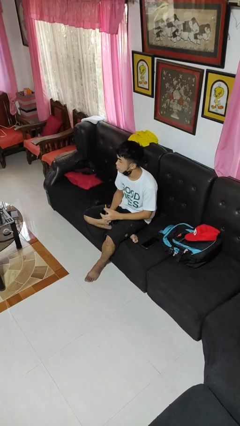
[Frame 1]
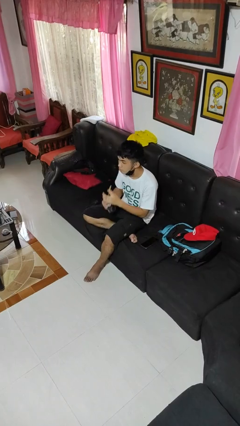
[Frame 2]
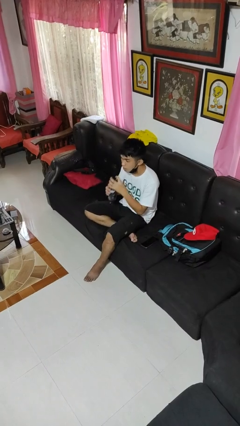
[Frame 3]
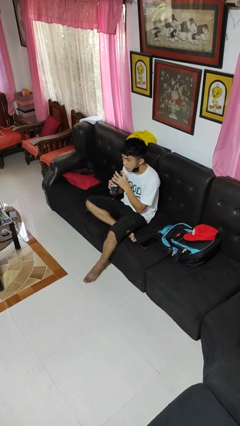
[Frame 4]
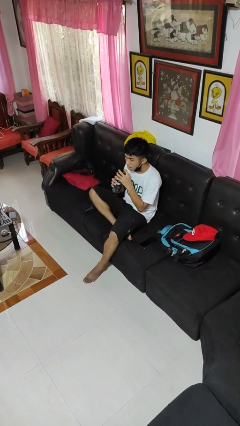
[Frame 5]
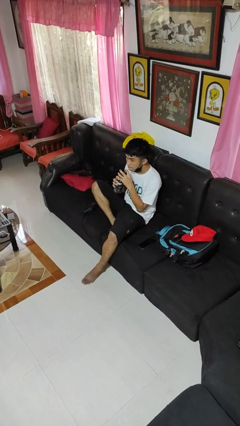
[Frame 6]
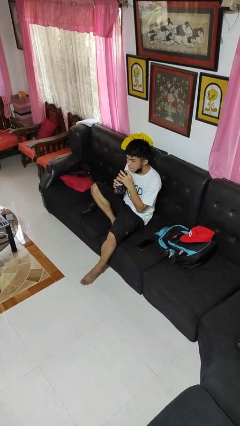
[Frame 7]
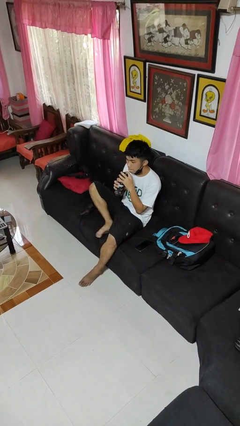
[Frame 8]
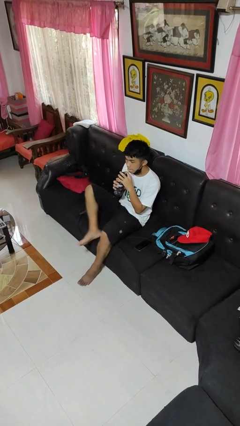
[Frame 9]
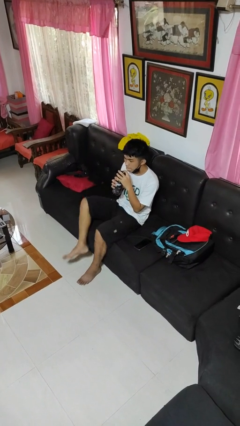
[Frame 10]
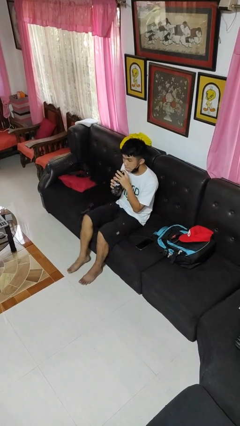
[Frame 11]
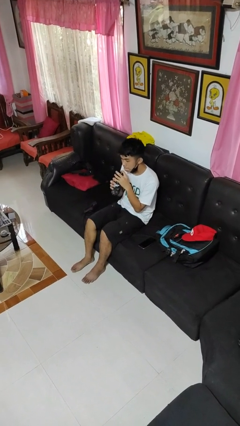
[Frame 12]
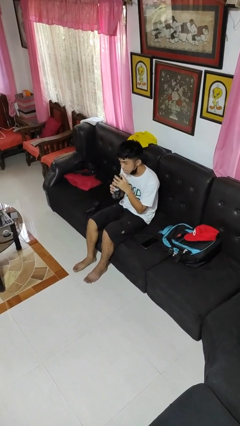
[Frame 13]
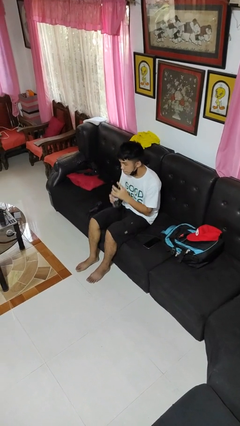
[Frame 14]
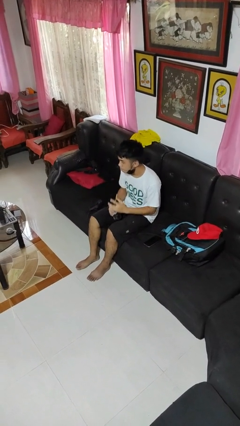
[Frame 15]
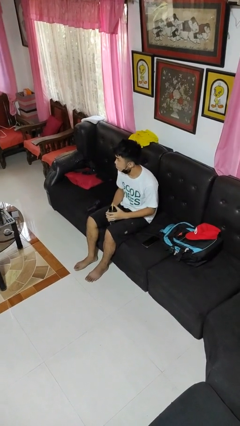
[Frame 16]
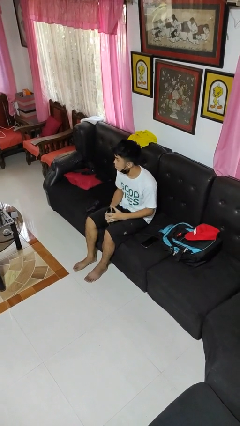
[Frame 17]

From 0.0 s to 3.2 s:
person drinks from straw

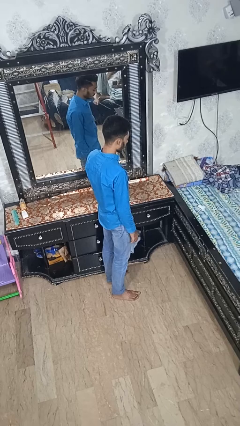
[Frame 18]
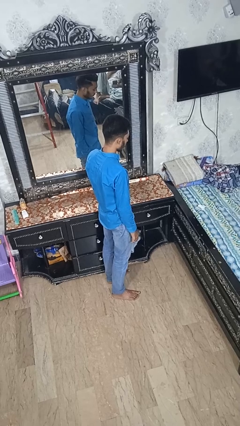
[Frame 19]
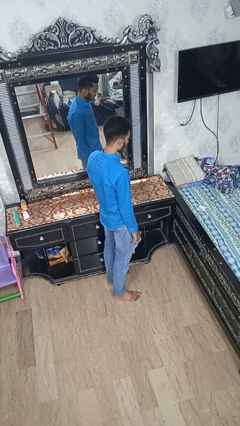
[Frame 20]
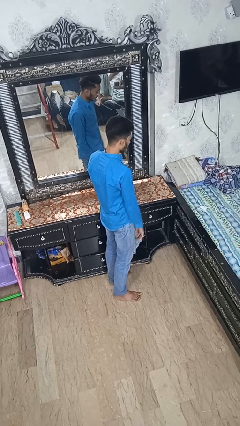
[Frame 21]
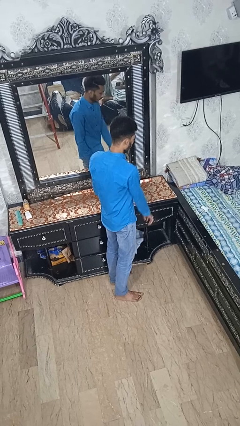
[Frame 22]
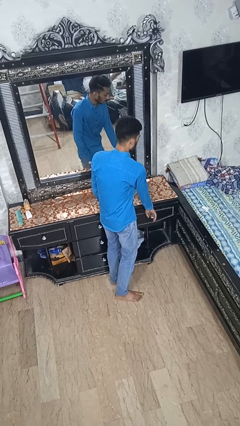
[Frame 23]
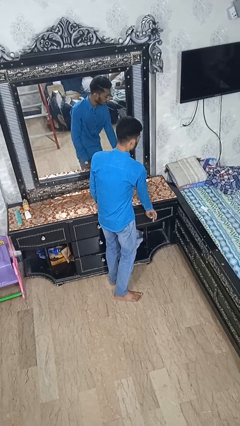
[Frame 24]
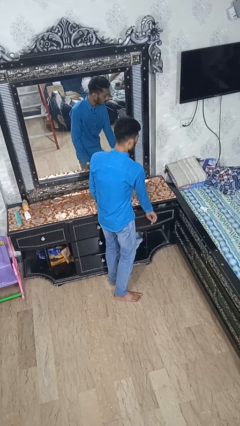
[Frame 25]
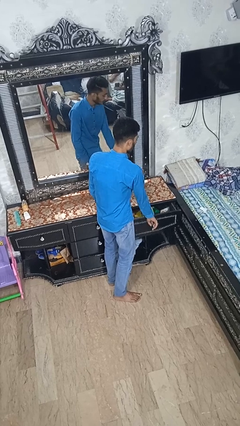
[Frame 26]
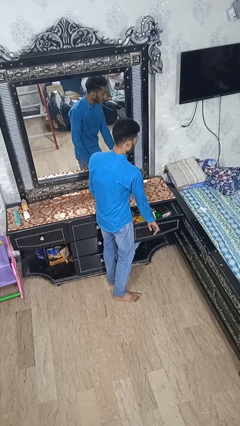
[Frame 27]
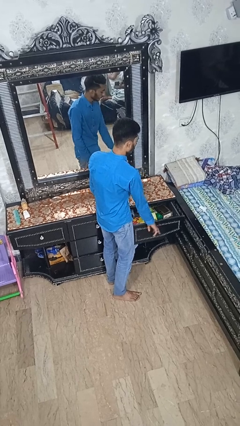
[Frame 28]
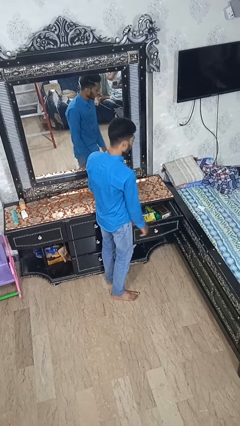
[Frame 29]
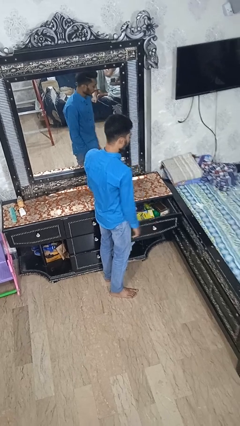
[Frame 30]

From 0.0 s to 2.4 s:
person opens dresser drawer

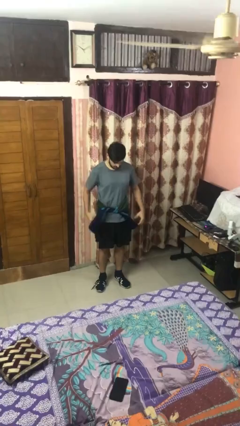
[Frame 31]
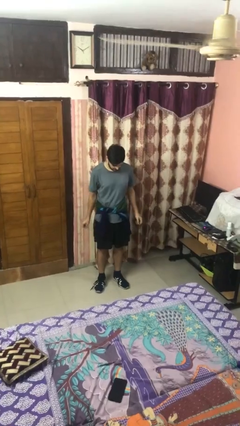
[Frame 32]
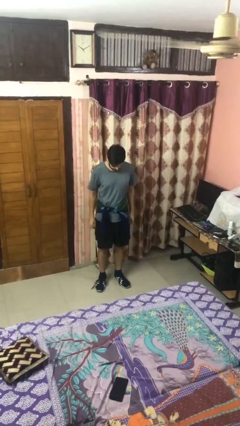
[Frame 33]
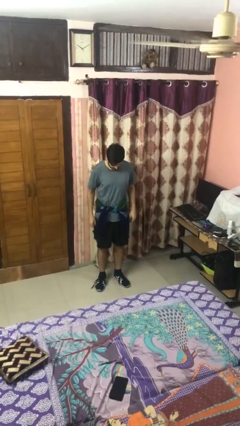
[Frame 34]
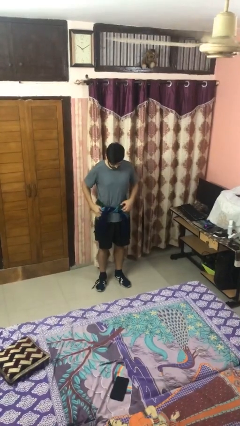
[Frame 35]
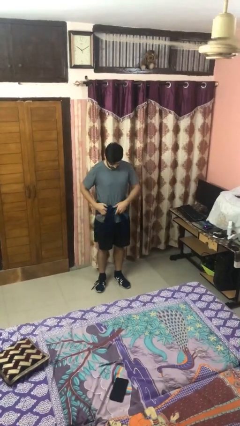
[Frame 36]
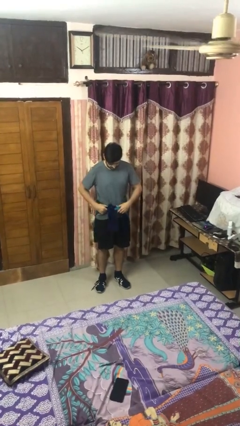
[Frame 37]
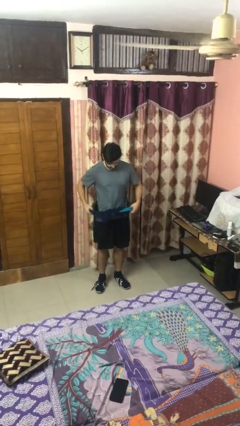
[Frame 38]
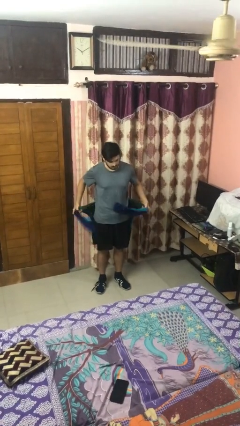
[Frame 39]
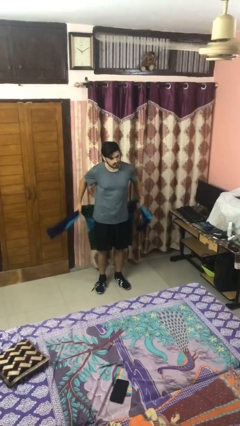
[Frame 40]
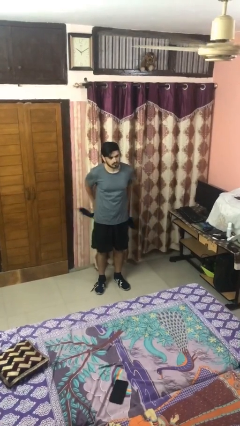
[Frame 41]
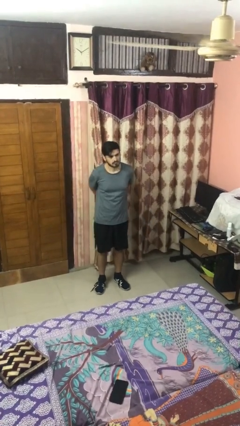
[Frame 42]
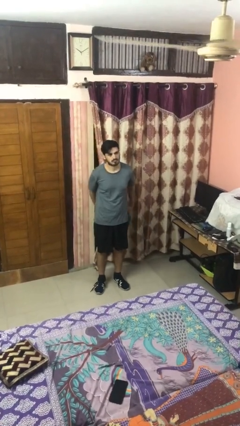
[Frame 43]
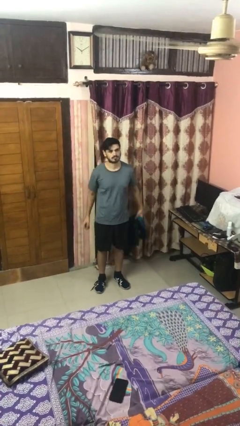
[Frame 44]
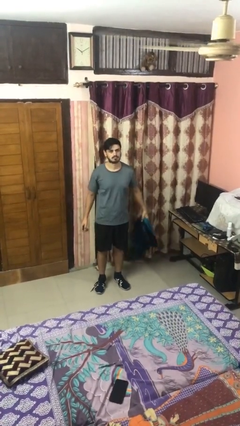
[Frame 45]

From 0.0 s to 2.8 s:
person unties jacket around waist

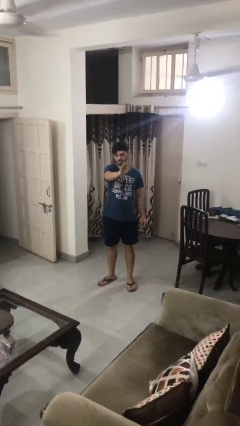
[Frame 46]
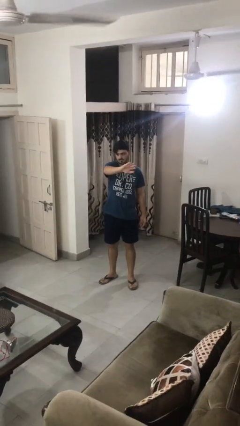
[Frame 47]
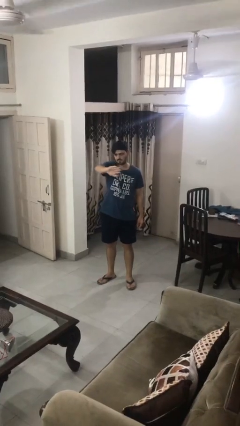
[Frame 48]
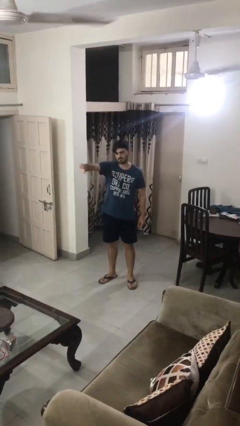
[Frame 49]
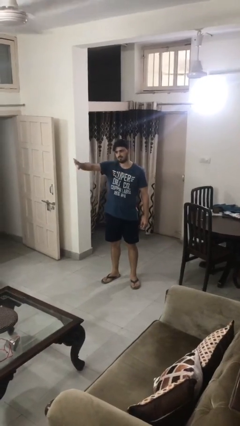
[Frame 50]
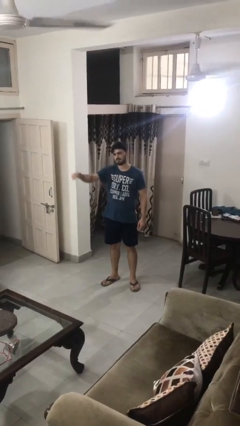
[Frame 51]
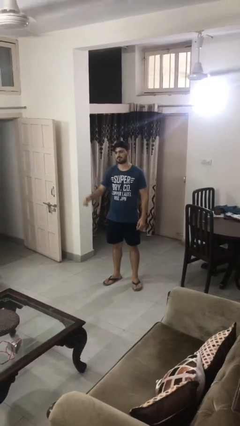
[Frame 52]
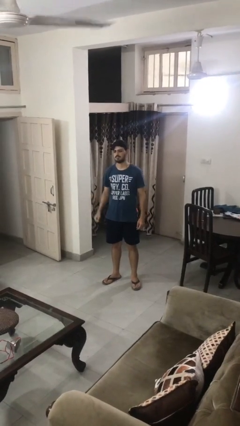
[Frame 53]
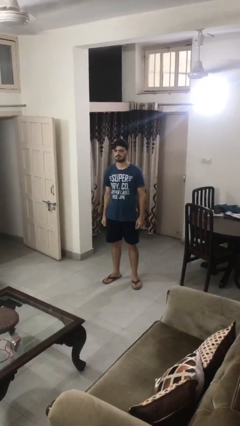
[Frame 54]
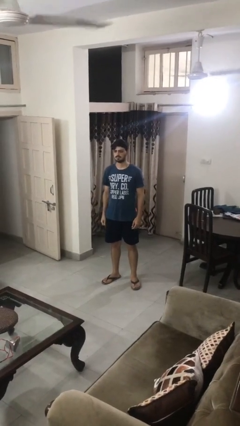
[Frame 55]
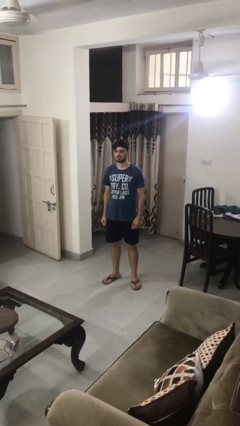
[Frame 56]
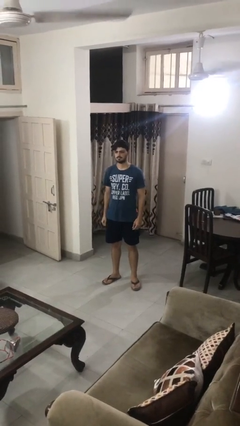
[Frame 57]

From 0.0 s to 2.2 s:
person gestures swipe right

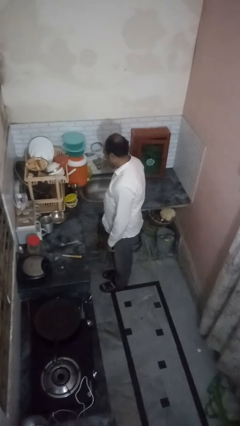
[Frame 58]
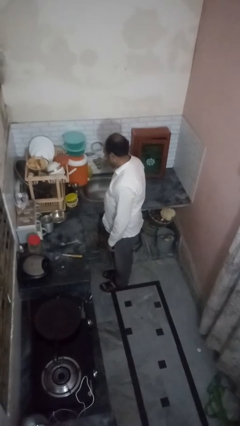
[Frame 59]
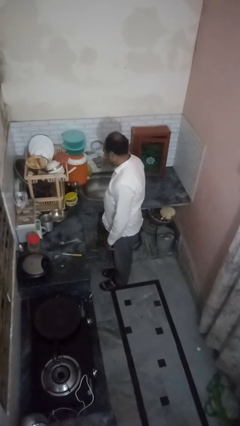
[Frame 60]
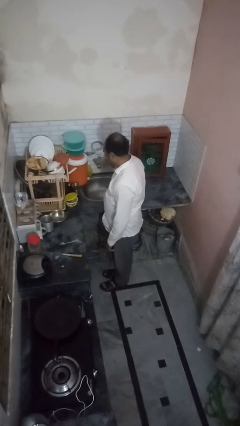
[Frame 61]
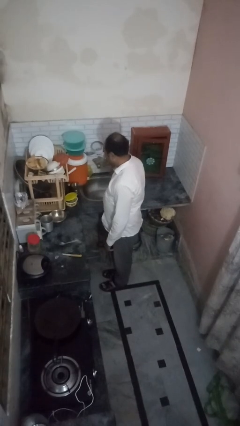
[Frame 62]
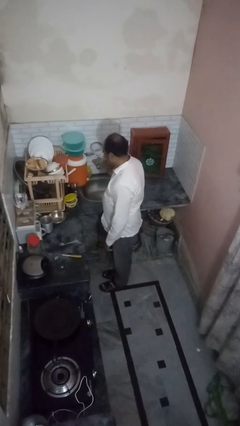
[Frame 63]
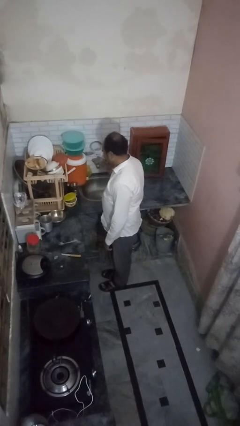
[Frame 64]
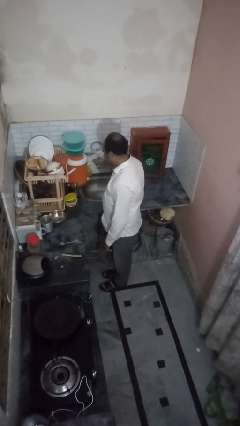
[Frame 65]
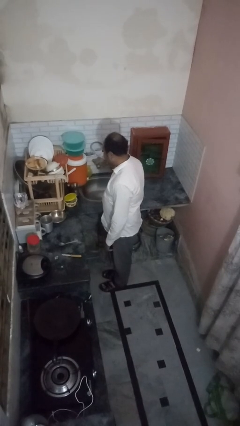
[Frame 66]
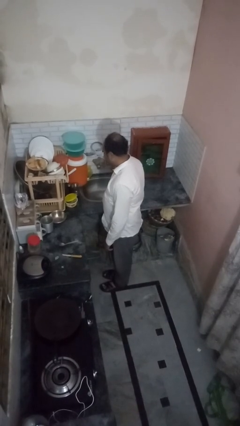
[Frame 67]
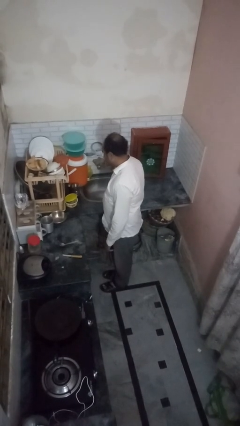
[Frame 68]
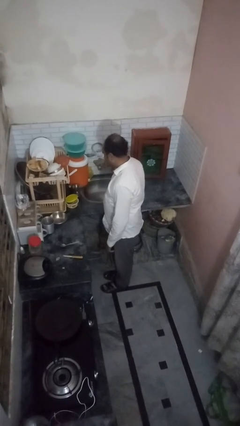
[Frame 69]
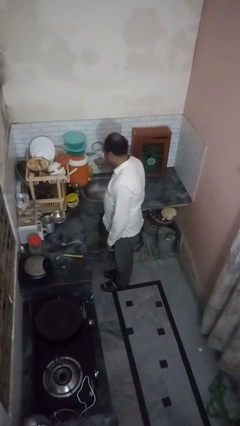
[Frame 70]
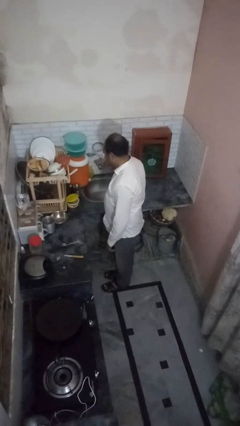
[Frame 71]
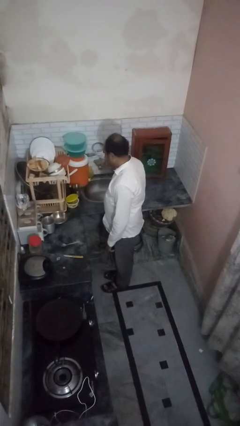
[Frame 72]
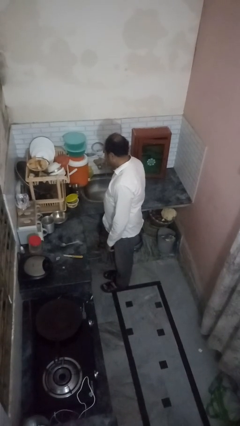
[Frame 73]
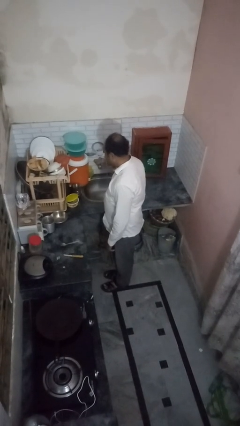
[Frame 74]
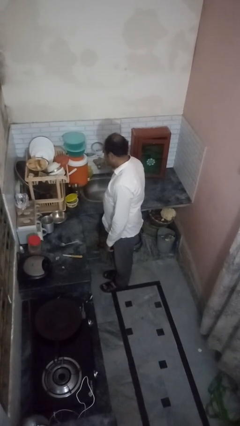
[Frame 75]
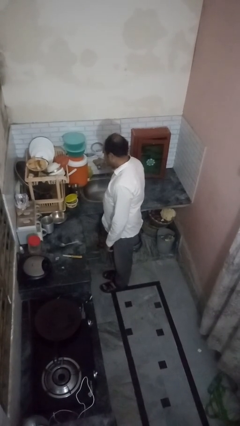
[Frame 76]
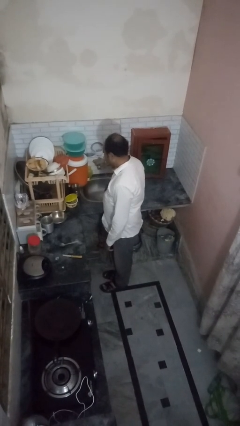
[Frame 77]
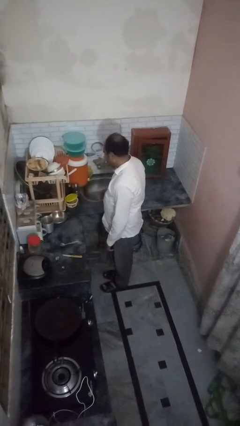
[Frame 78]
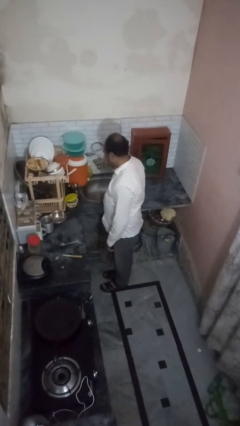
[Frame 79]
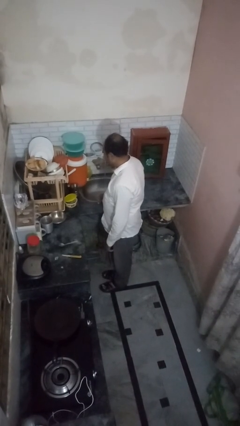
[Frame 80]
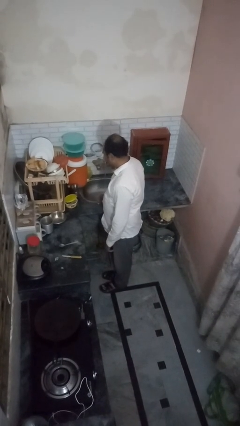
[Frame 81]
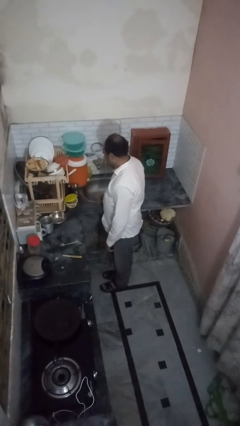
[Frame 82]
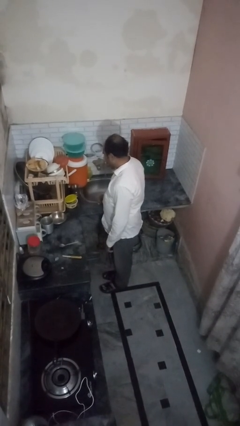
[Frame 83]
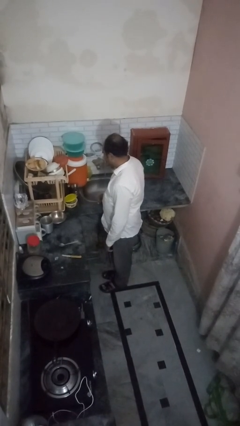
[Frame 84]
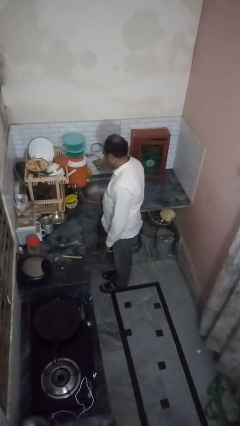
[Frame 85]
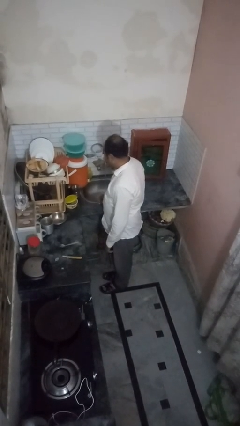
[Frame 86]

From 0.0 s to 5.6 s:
person turns on faucet

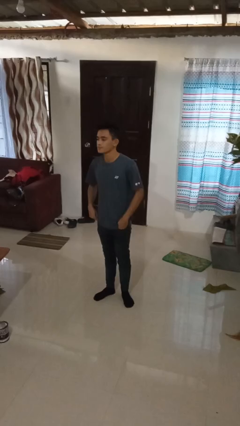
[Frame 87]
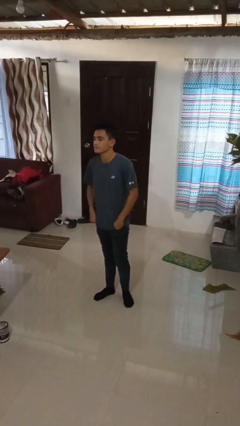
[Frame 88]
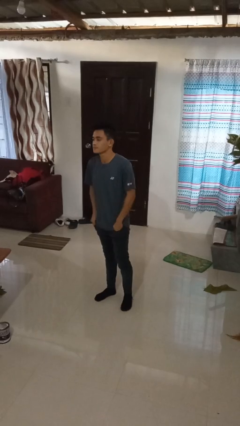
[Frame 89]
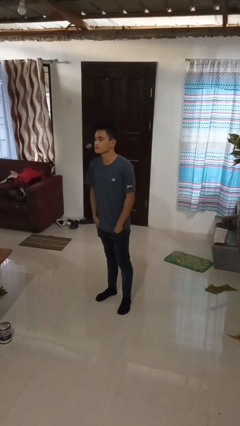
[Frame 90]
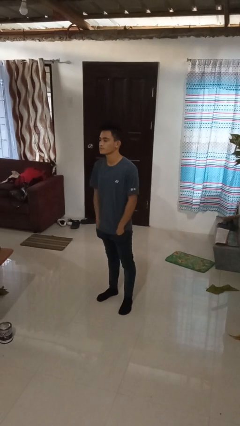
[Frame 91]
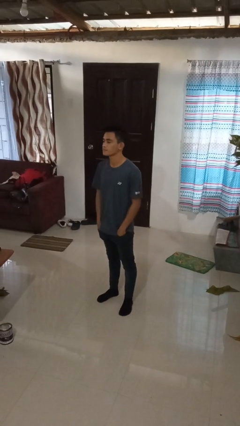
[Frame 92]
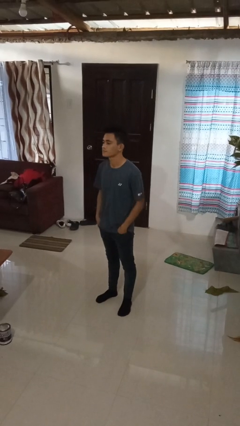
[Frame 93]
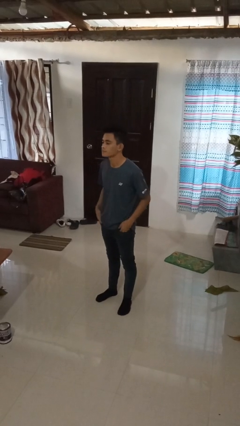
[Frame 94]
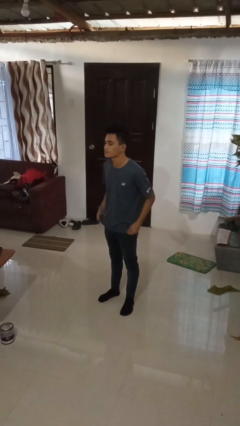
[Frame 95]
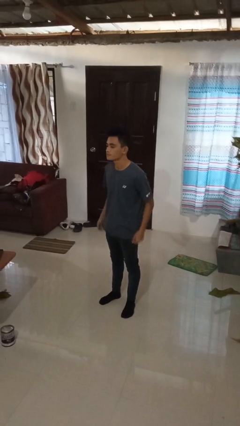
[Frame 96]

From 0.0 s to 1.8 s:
person puts hands in back pockets
